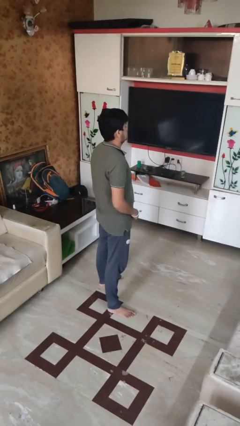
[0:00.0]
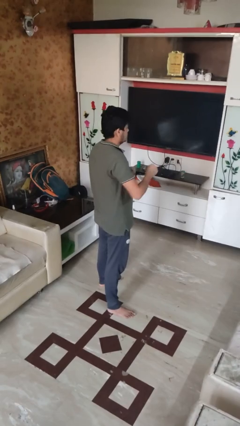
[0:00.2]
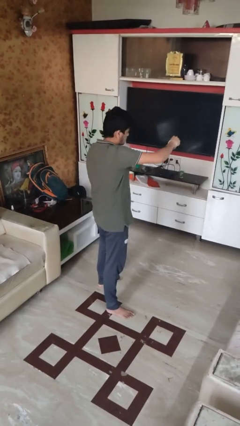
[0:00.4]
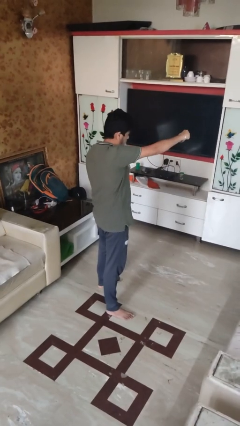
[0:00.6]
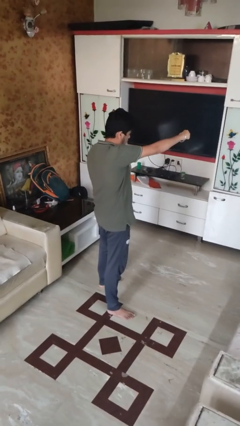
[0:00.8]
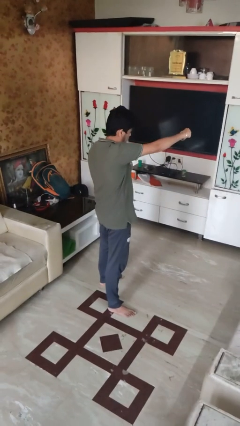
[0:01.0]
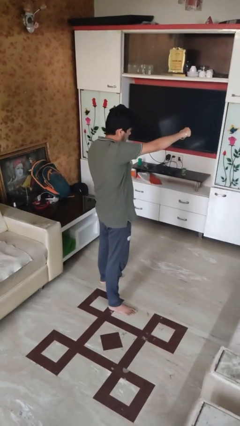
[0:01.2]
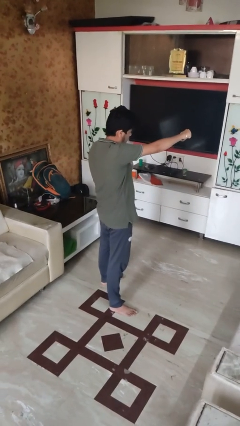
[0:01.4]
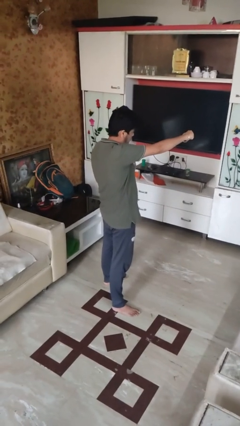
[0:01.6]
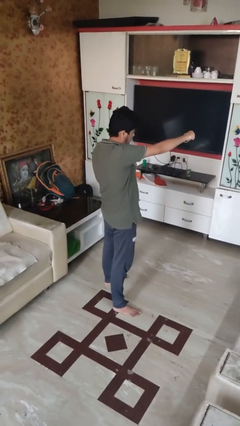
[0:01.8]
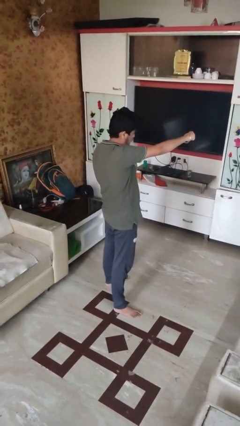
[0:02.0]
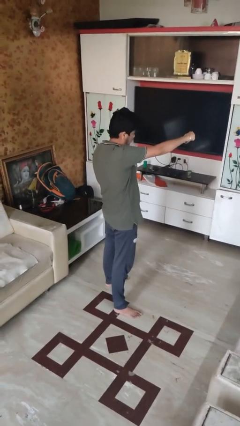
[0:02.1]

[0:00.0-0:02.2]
person punches

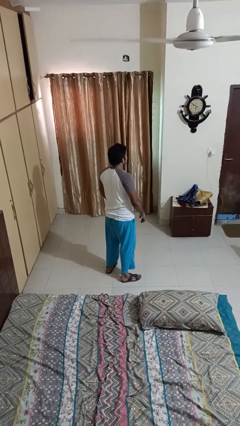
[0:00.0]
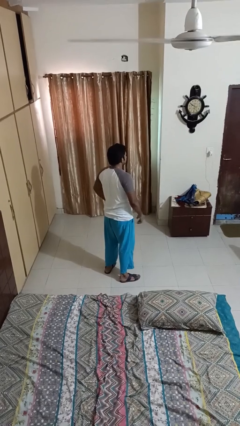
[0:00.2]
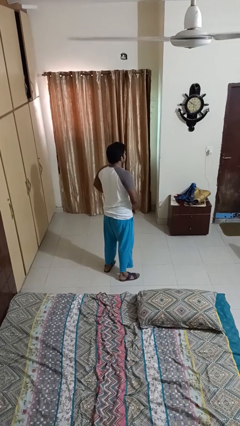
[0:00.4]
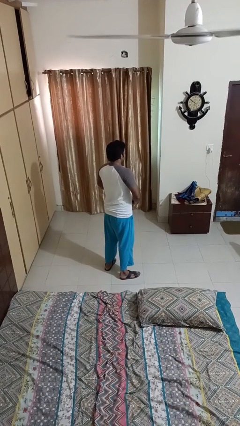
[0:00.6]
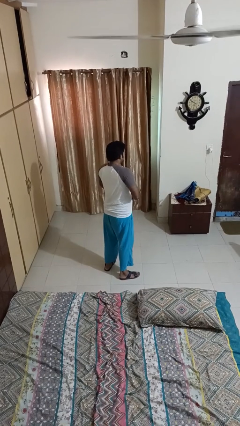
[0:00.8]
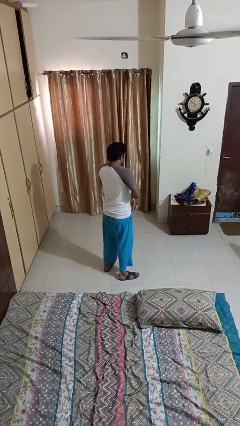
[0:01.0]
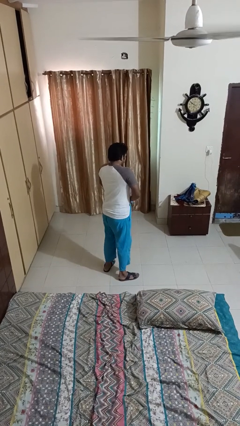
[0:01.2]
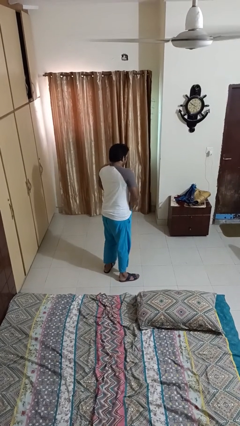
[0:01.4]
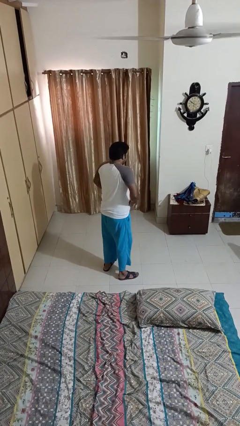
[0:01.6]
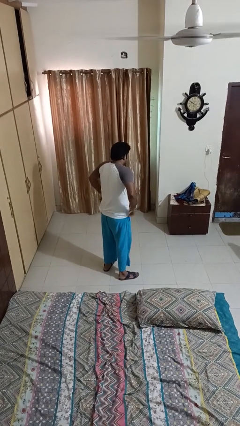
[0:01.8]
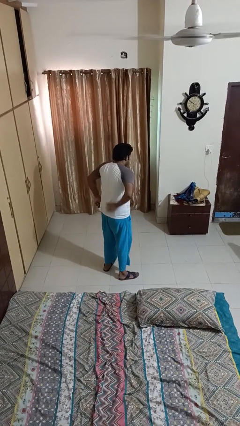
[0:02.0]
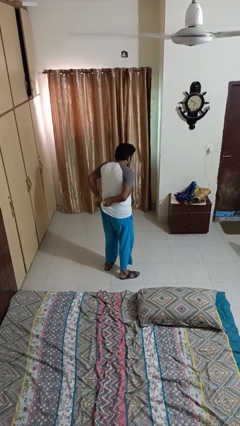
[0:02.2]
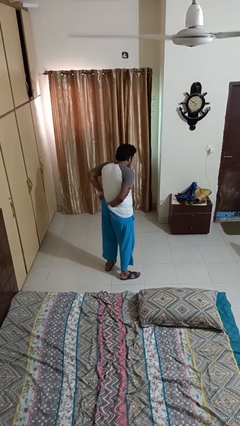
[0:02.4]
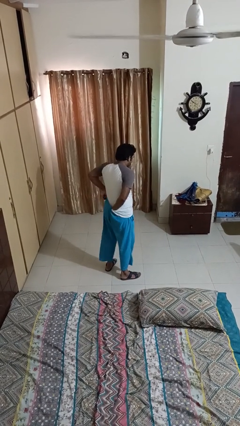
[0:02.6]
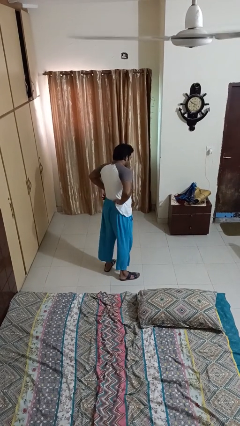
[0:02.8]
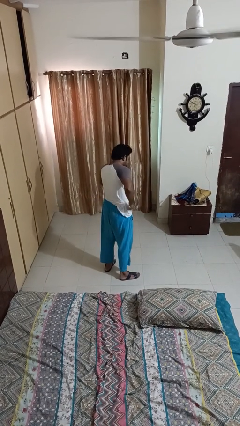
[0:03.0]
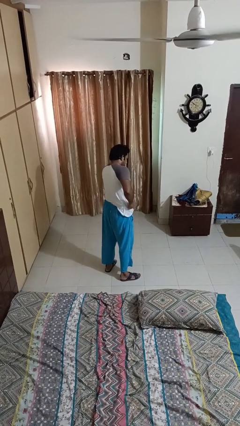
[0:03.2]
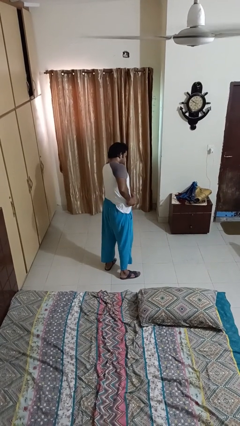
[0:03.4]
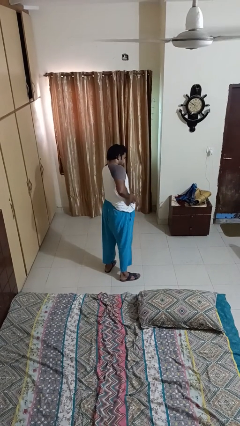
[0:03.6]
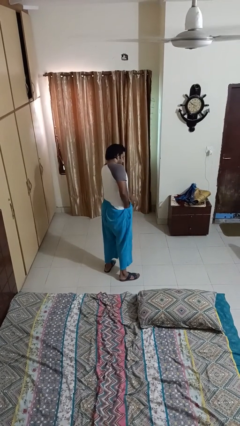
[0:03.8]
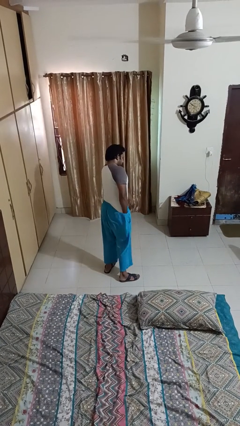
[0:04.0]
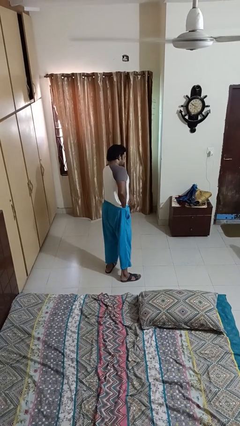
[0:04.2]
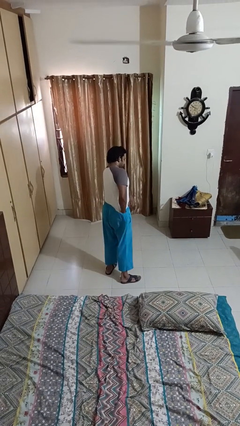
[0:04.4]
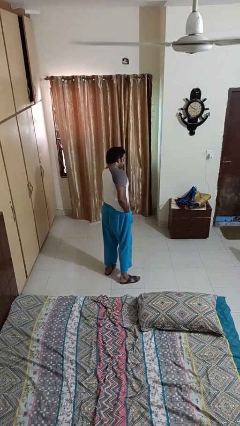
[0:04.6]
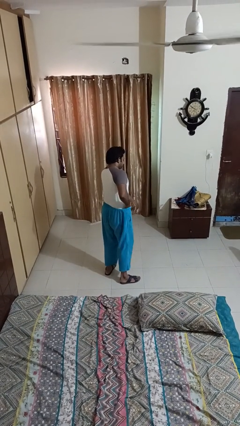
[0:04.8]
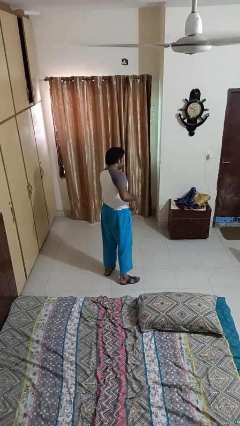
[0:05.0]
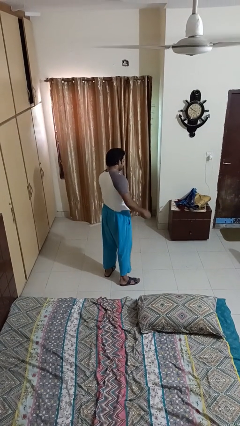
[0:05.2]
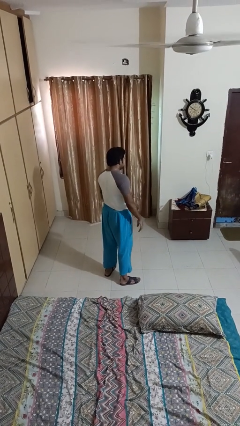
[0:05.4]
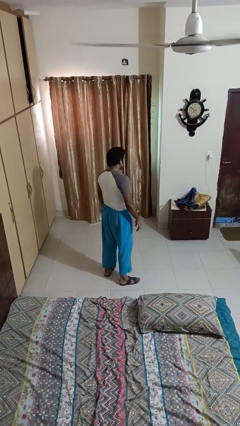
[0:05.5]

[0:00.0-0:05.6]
person tucks in shirt

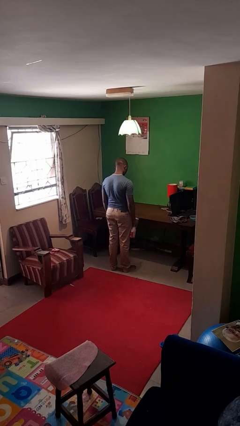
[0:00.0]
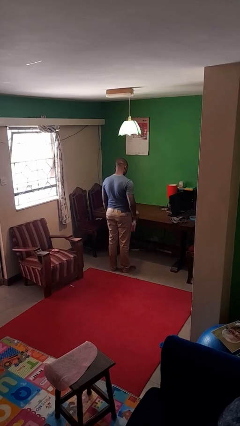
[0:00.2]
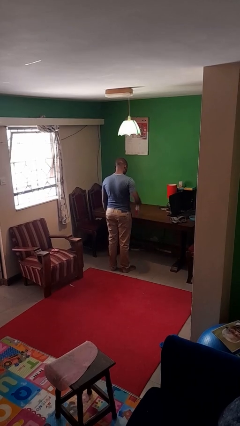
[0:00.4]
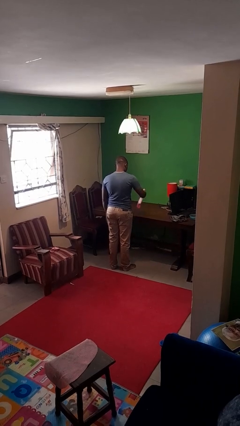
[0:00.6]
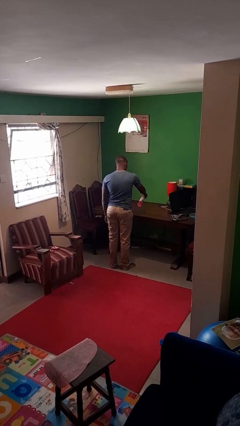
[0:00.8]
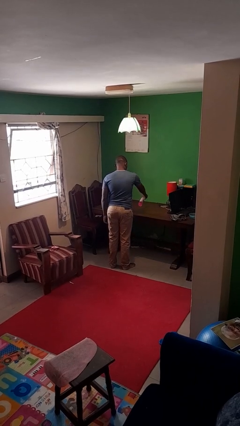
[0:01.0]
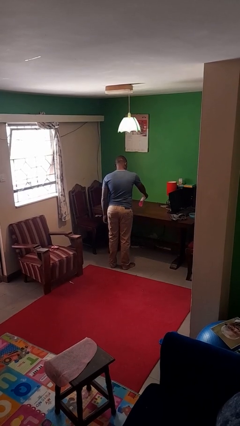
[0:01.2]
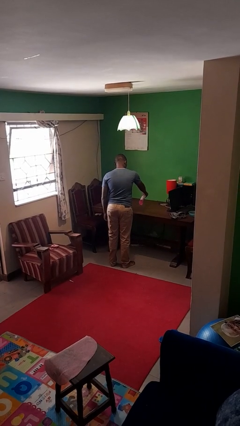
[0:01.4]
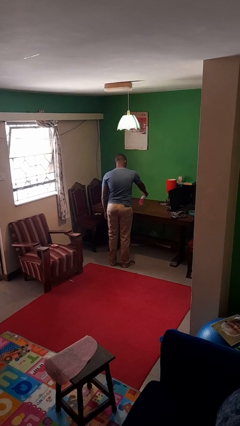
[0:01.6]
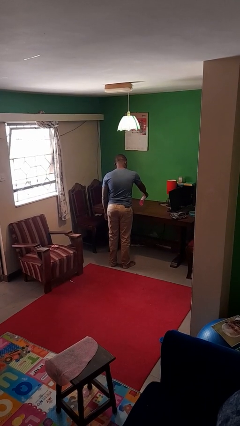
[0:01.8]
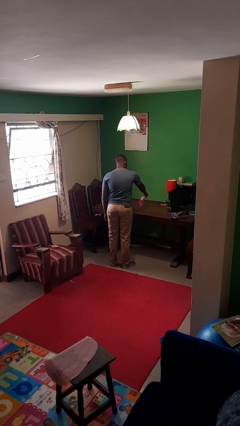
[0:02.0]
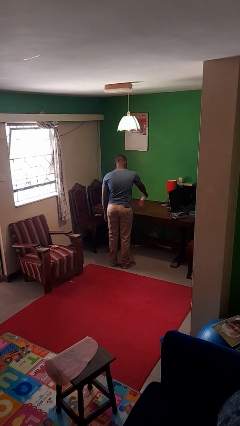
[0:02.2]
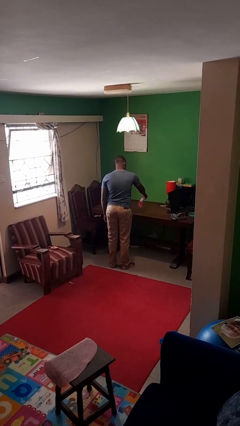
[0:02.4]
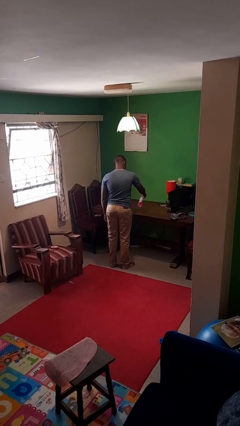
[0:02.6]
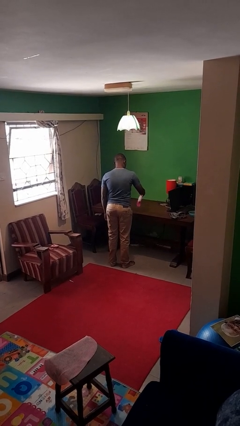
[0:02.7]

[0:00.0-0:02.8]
person sprays from bottle

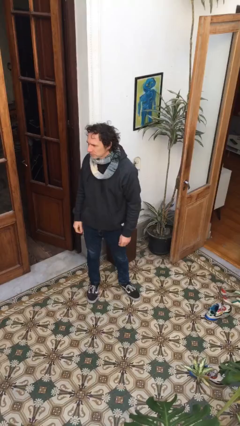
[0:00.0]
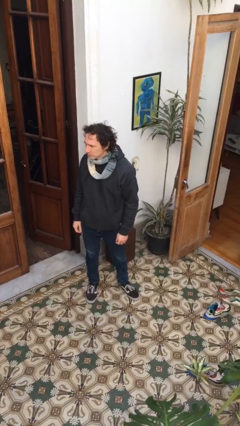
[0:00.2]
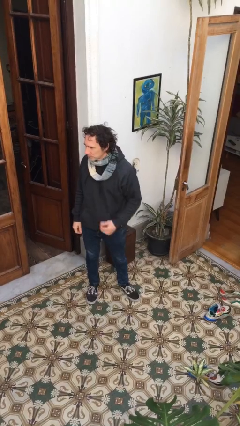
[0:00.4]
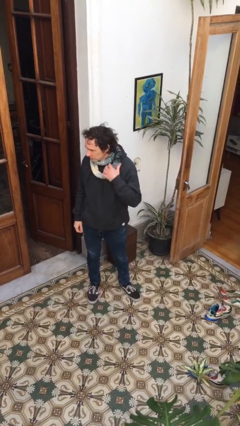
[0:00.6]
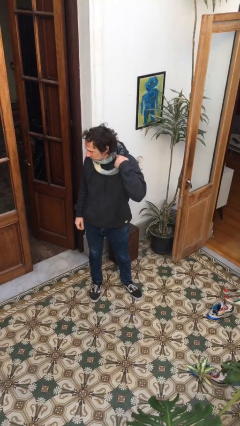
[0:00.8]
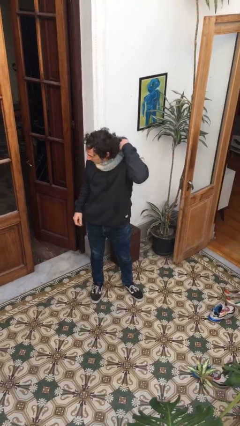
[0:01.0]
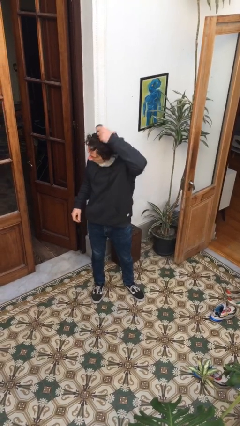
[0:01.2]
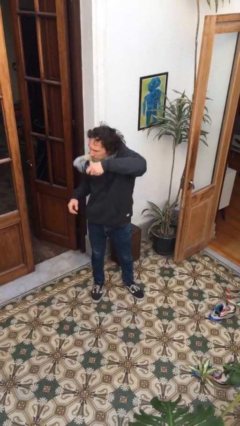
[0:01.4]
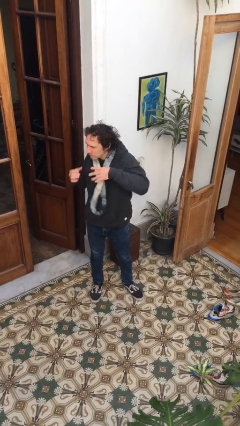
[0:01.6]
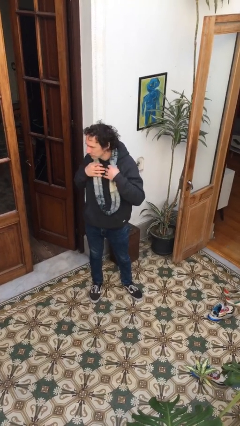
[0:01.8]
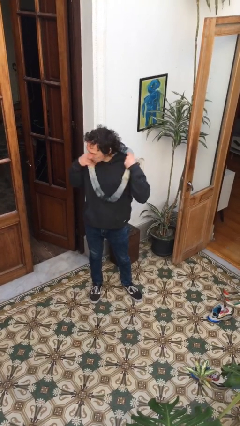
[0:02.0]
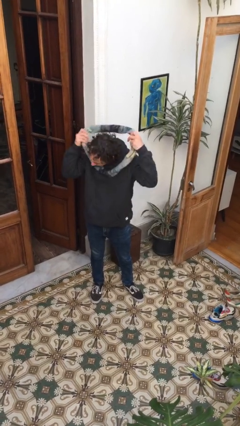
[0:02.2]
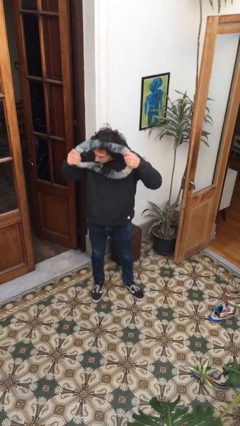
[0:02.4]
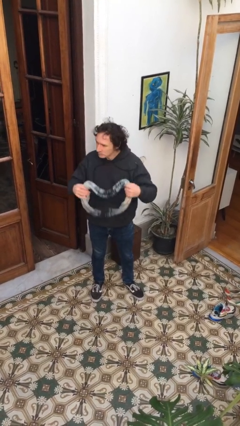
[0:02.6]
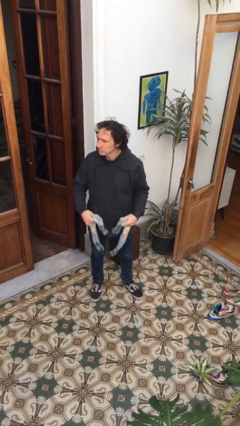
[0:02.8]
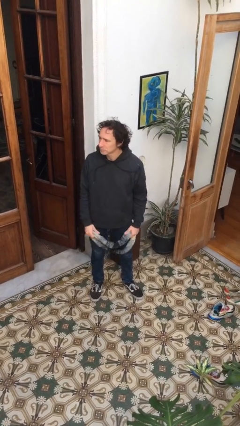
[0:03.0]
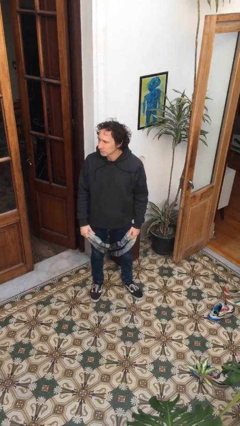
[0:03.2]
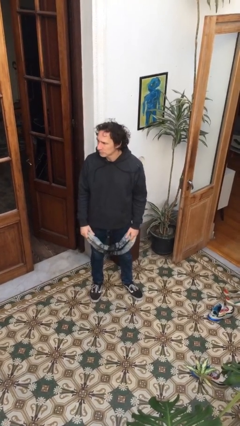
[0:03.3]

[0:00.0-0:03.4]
person takes off scarf

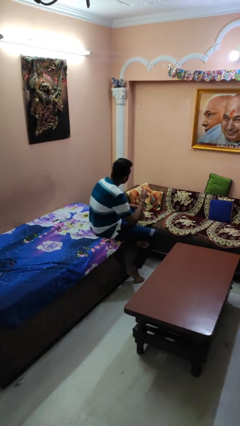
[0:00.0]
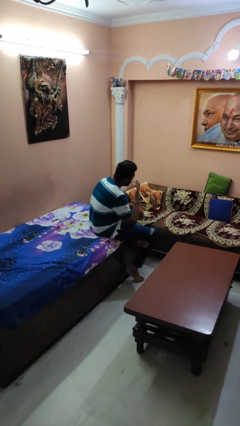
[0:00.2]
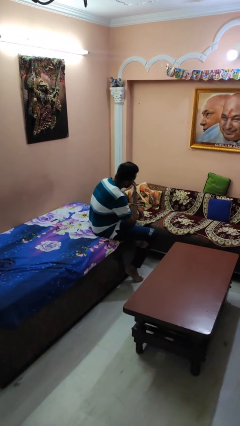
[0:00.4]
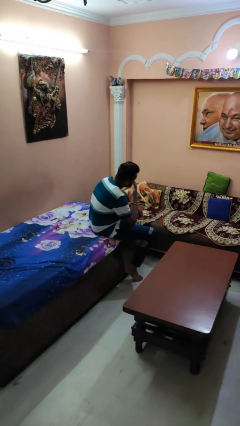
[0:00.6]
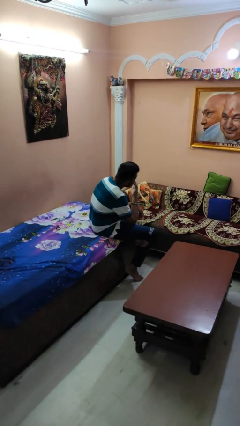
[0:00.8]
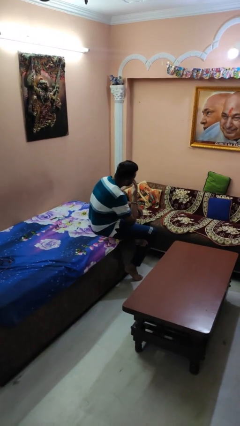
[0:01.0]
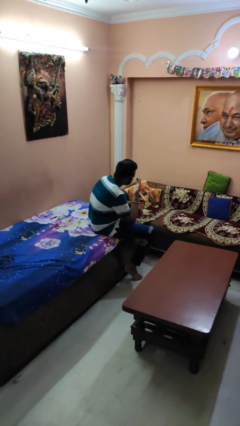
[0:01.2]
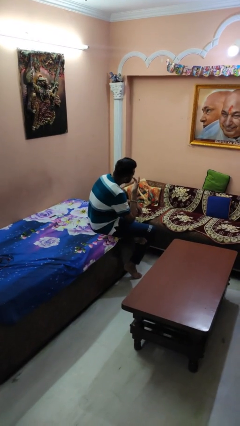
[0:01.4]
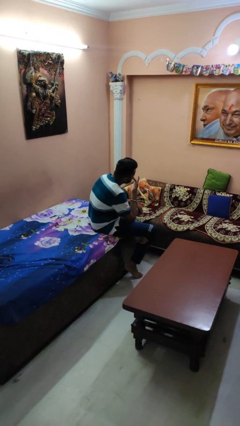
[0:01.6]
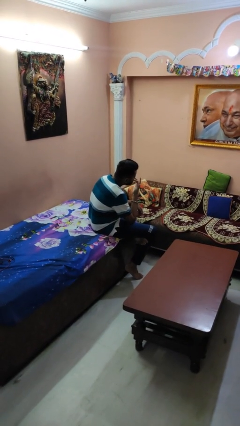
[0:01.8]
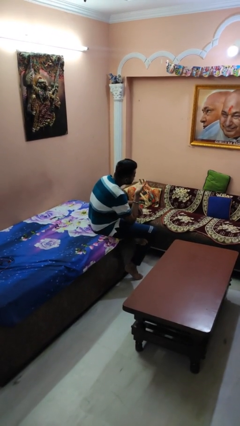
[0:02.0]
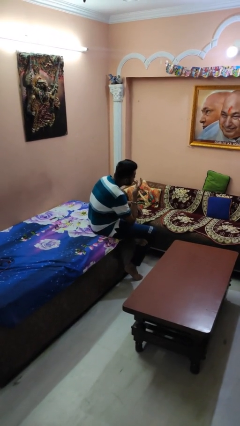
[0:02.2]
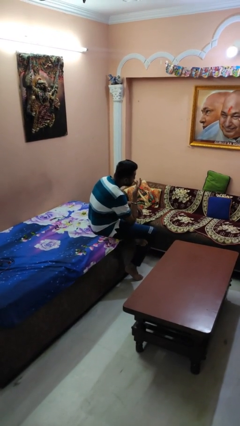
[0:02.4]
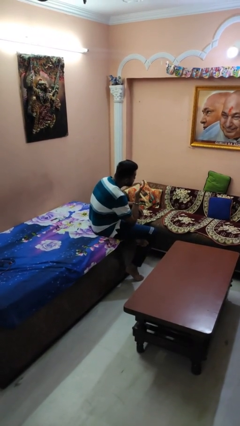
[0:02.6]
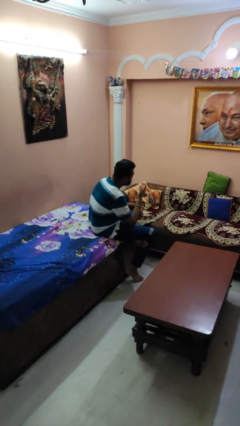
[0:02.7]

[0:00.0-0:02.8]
person licks fingers

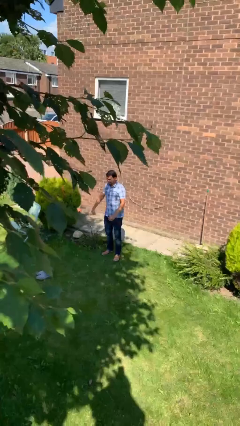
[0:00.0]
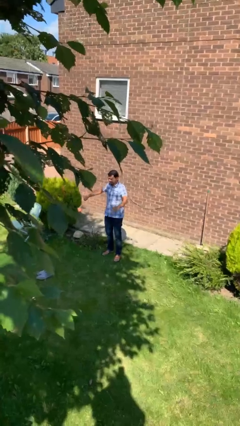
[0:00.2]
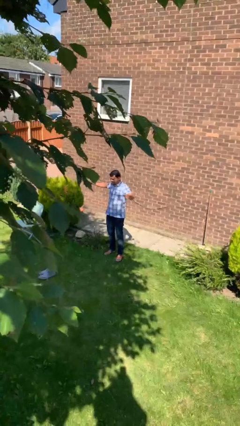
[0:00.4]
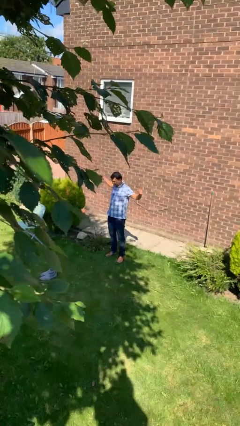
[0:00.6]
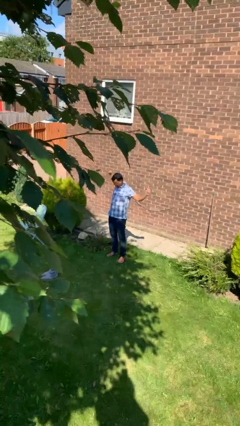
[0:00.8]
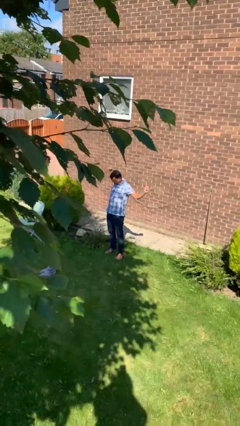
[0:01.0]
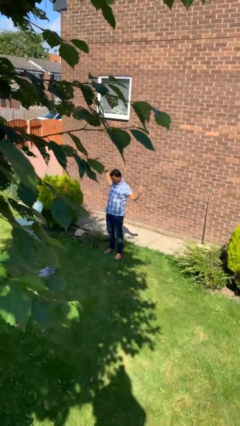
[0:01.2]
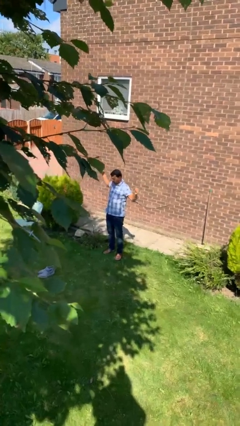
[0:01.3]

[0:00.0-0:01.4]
person stretches arms to side
